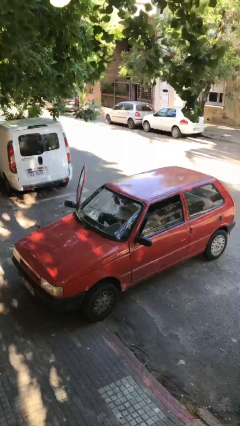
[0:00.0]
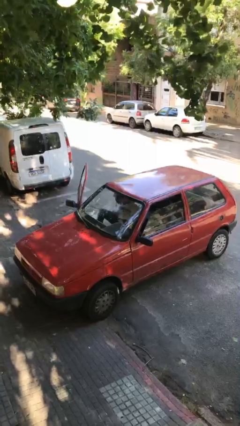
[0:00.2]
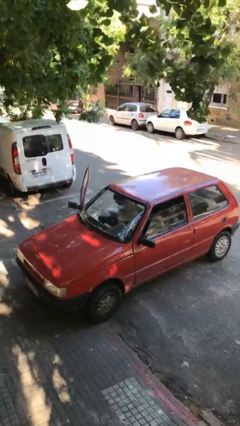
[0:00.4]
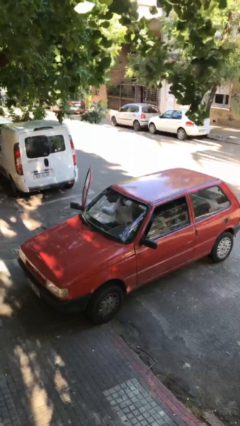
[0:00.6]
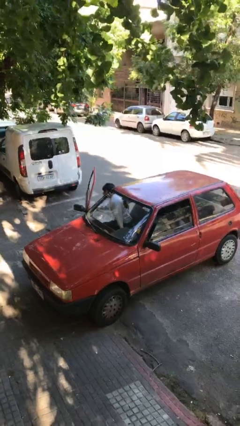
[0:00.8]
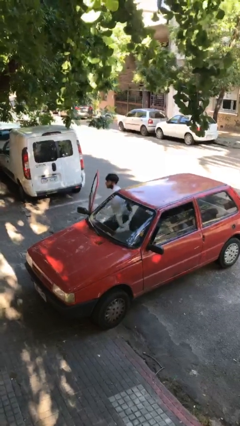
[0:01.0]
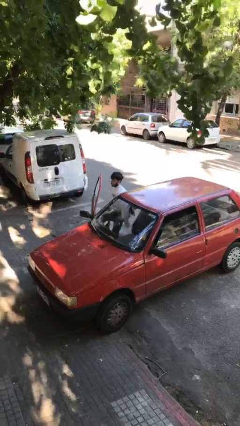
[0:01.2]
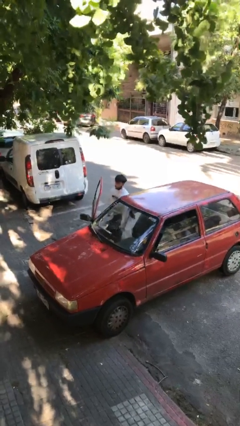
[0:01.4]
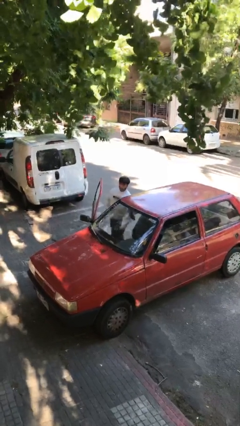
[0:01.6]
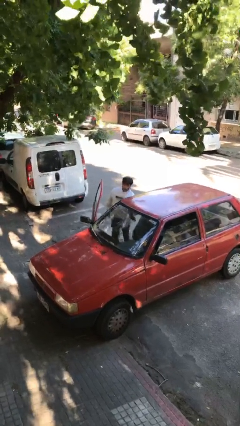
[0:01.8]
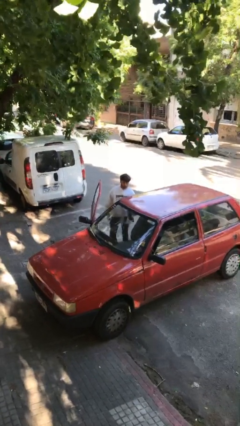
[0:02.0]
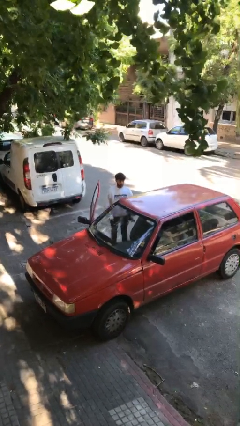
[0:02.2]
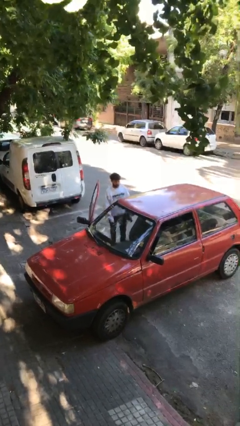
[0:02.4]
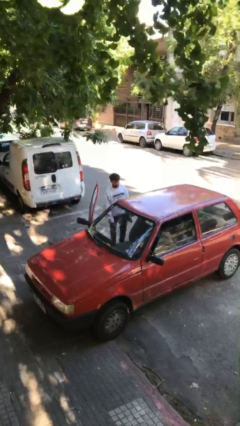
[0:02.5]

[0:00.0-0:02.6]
person exits car

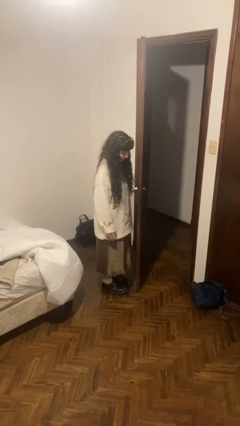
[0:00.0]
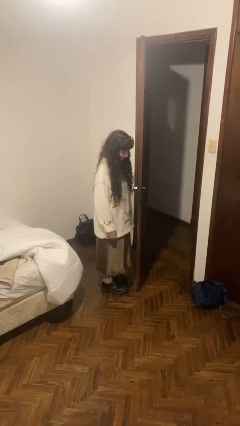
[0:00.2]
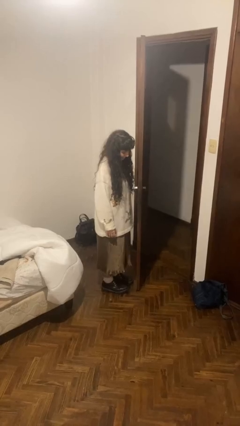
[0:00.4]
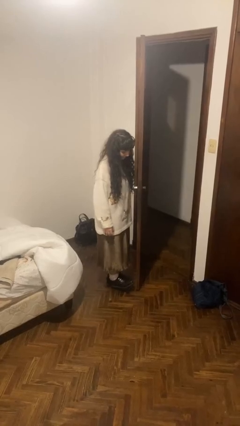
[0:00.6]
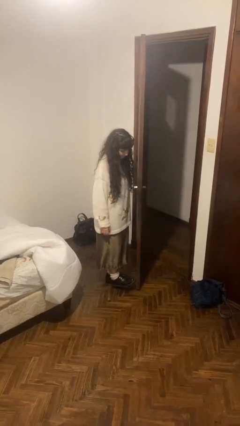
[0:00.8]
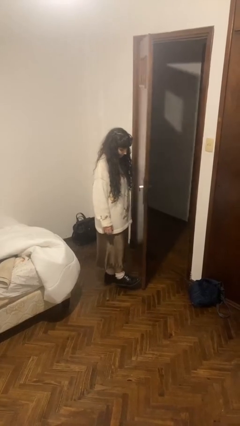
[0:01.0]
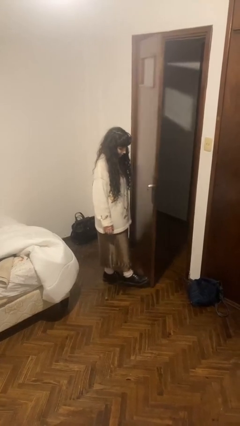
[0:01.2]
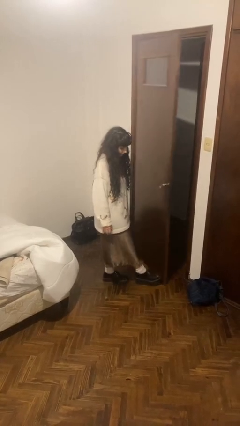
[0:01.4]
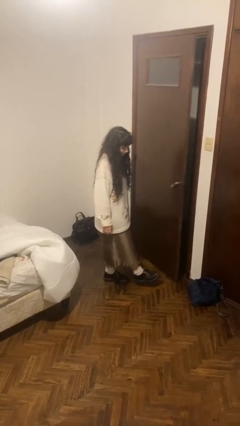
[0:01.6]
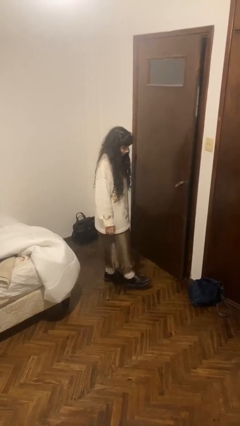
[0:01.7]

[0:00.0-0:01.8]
person closes door with foot

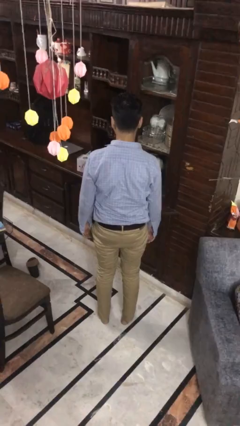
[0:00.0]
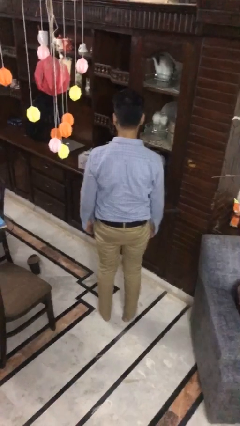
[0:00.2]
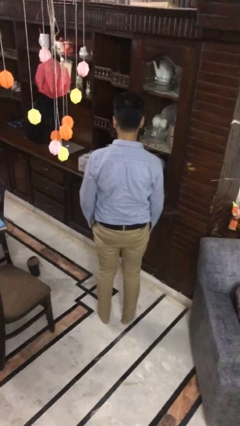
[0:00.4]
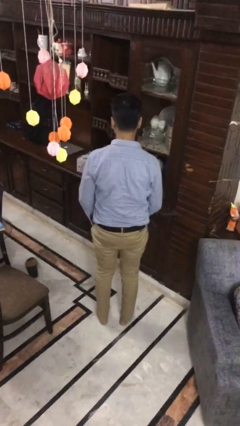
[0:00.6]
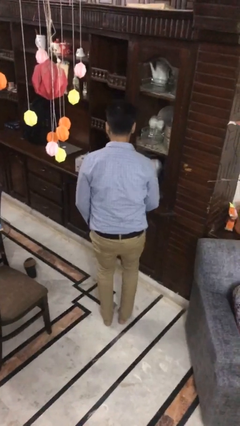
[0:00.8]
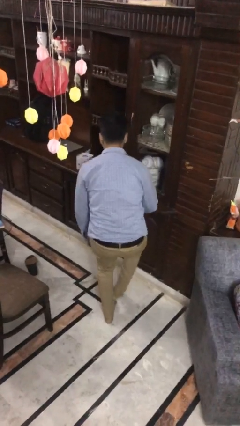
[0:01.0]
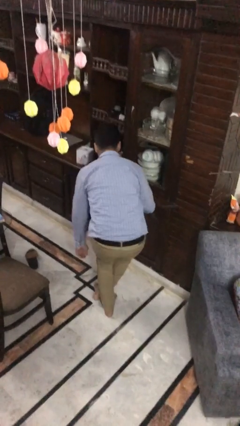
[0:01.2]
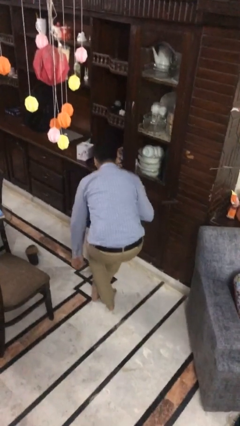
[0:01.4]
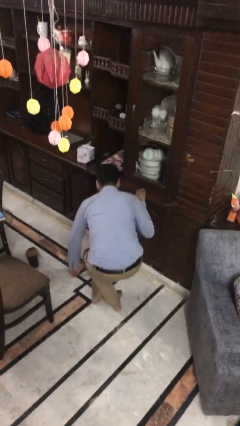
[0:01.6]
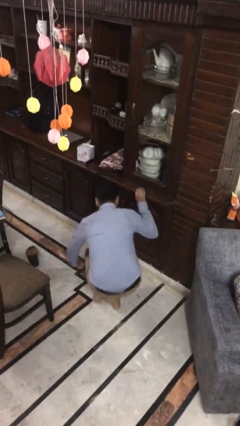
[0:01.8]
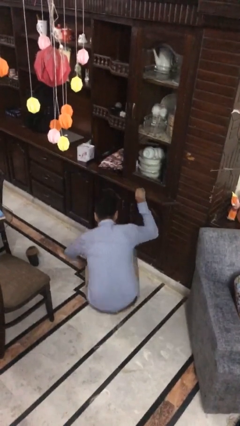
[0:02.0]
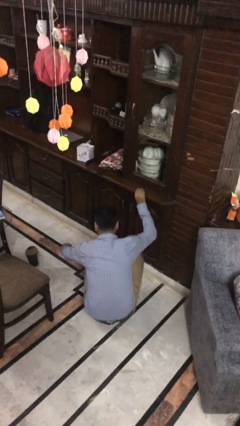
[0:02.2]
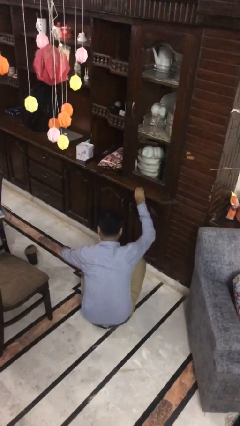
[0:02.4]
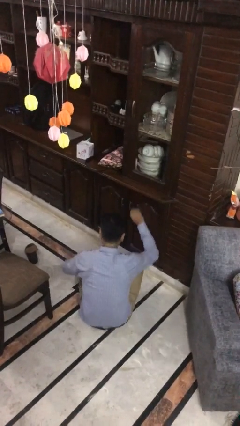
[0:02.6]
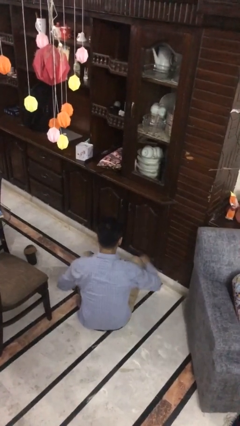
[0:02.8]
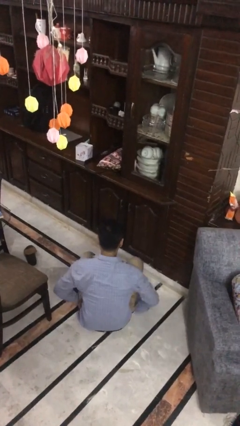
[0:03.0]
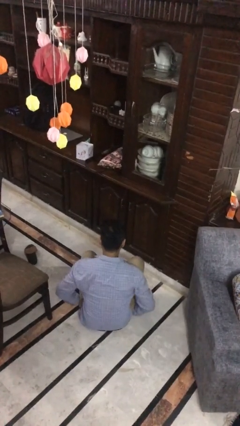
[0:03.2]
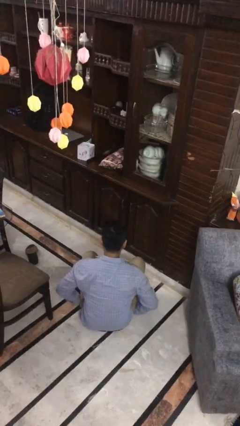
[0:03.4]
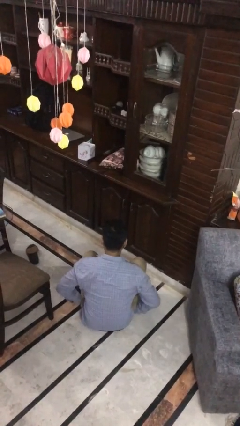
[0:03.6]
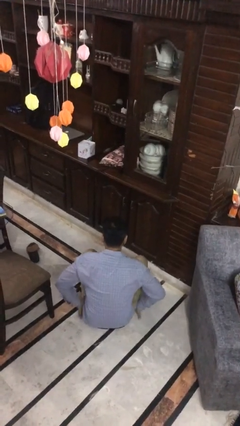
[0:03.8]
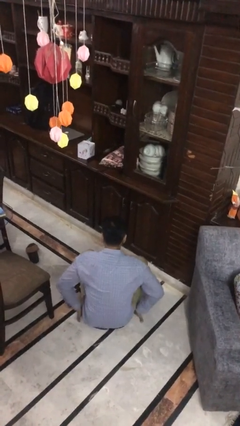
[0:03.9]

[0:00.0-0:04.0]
person sits crisscross

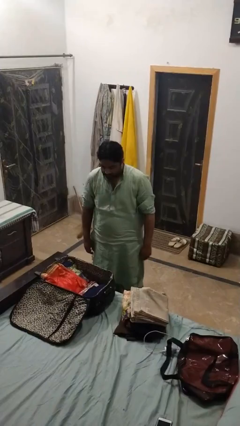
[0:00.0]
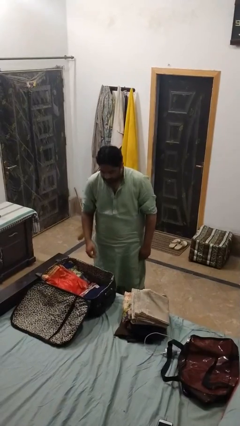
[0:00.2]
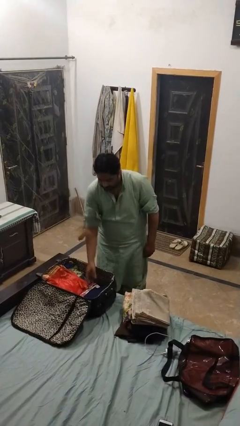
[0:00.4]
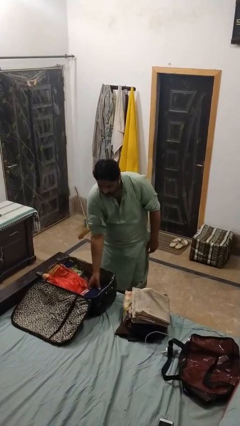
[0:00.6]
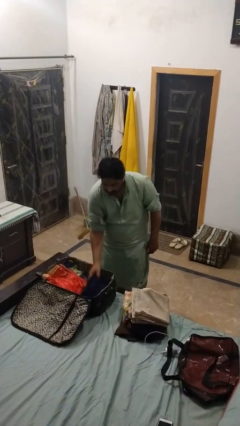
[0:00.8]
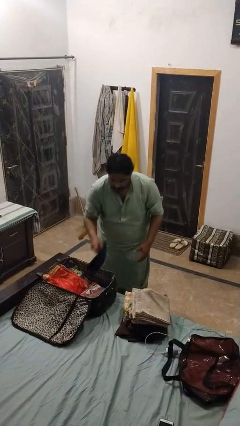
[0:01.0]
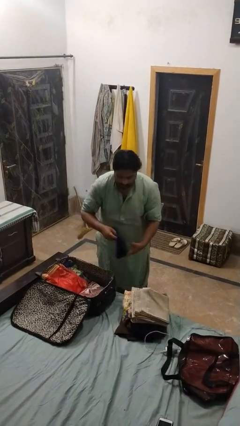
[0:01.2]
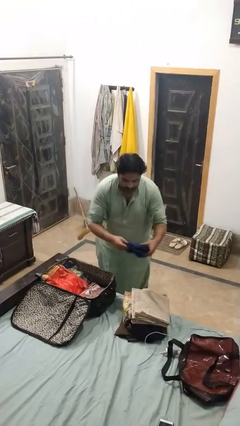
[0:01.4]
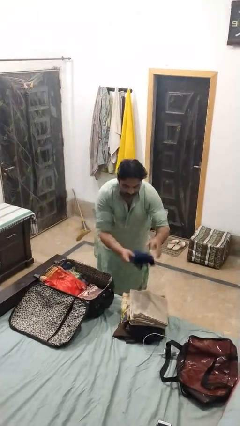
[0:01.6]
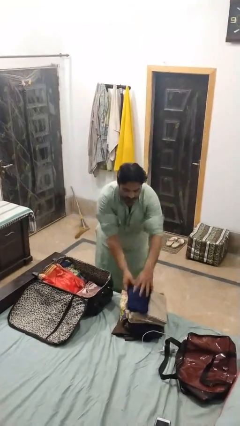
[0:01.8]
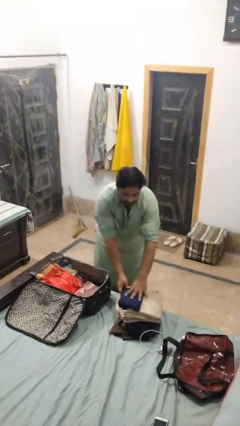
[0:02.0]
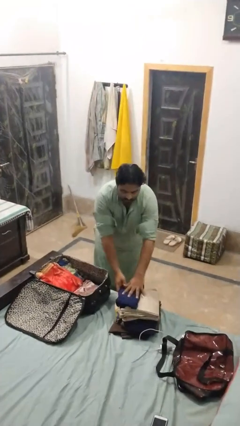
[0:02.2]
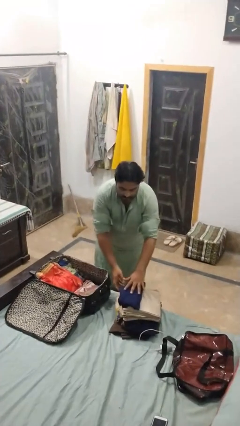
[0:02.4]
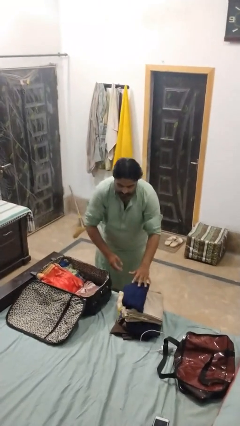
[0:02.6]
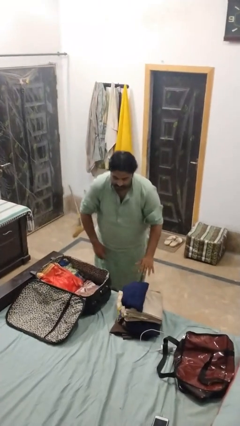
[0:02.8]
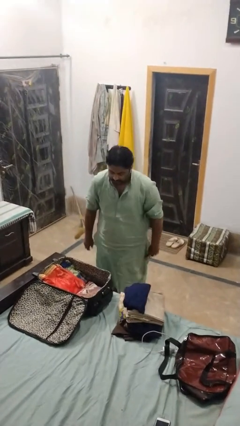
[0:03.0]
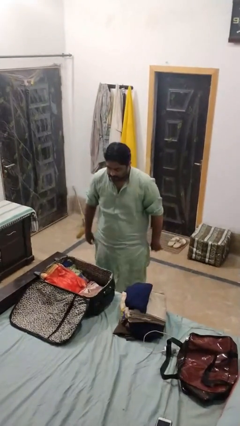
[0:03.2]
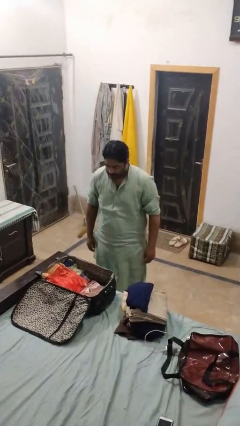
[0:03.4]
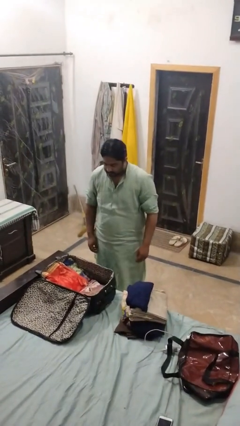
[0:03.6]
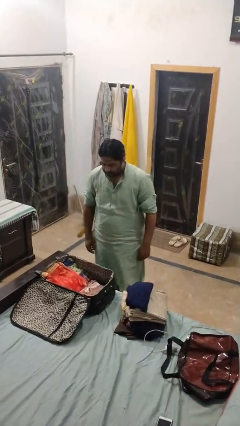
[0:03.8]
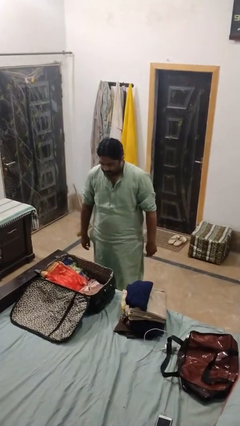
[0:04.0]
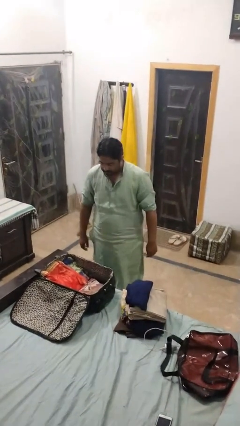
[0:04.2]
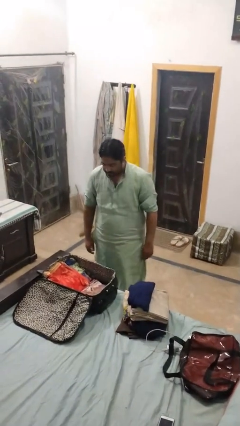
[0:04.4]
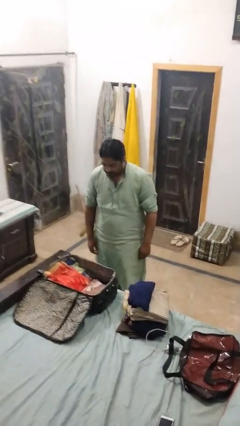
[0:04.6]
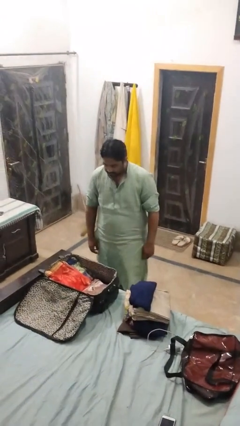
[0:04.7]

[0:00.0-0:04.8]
person unloads clothes from suitcase

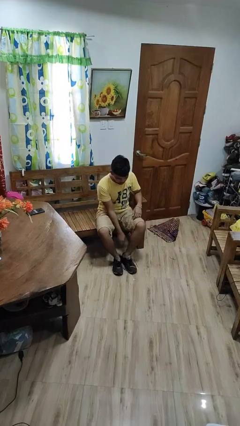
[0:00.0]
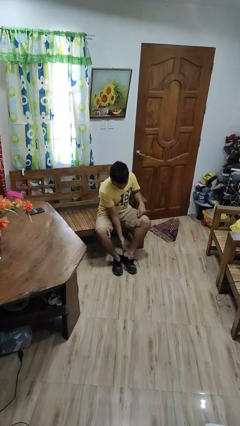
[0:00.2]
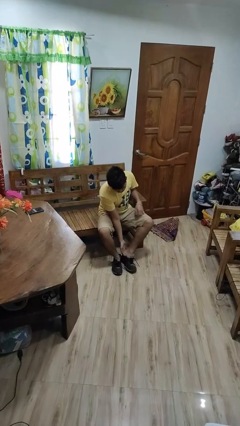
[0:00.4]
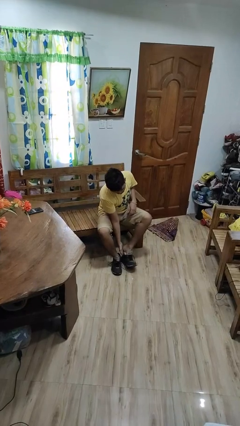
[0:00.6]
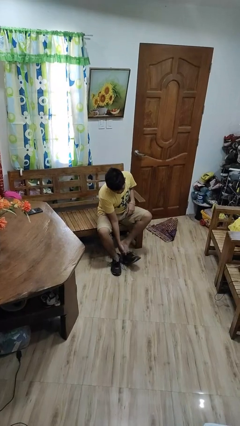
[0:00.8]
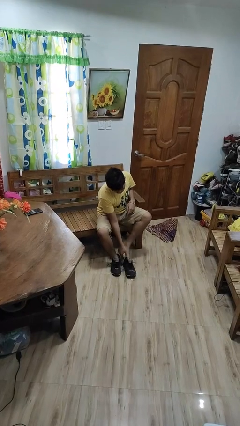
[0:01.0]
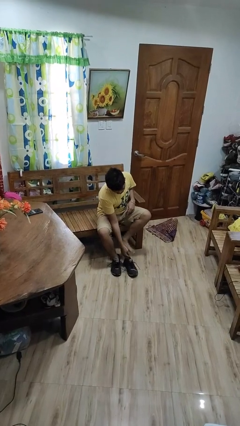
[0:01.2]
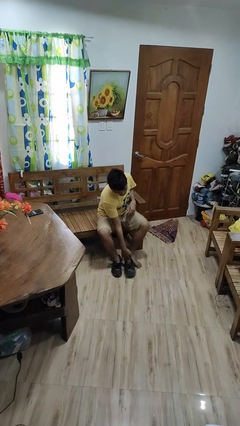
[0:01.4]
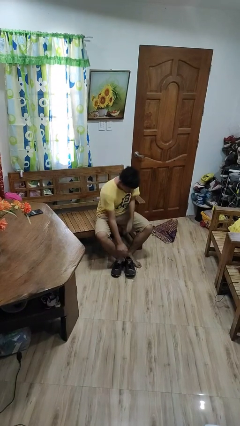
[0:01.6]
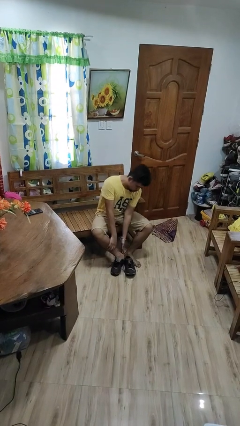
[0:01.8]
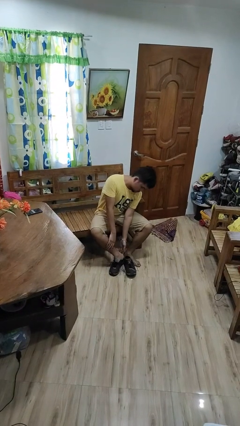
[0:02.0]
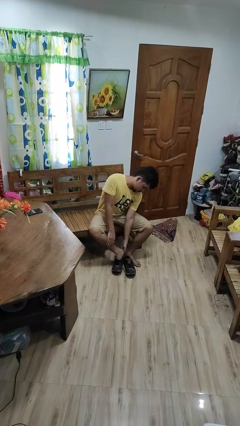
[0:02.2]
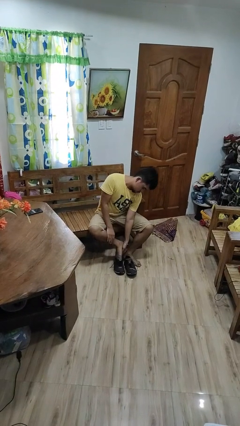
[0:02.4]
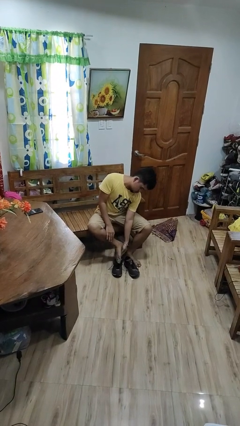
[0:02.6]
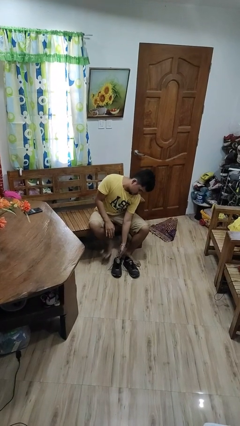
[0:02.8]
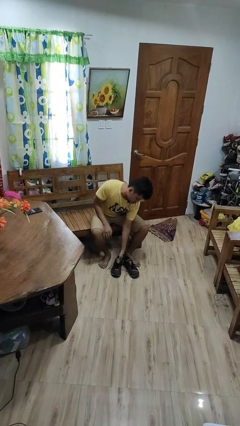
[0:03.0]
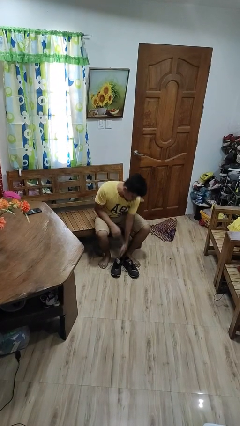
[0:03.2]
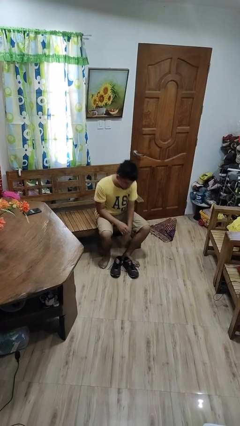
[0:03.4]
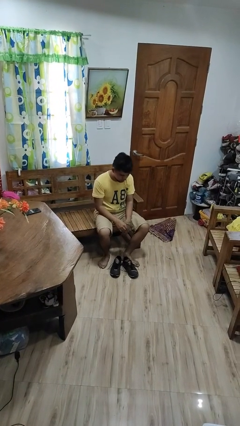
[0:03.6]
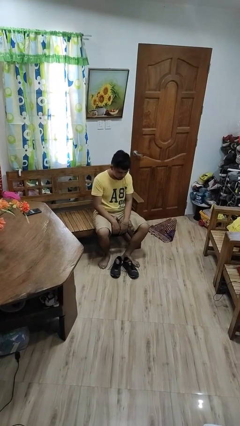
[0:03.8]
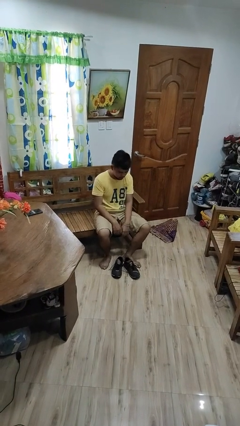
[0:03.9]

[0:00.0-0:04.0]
person takes off shoes
